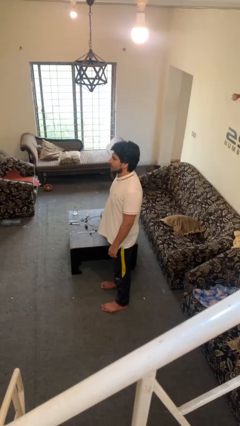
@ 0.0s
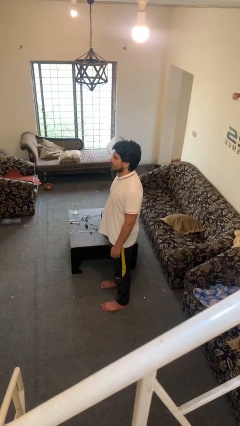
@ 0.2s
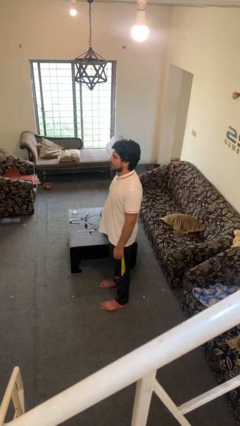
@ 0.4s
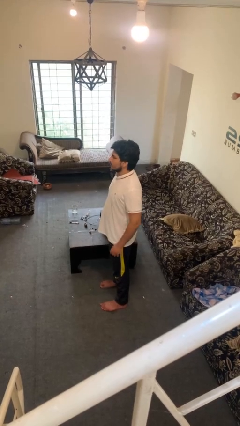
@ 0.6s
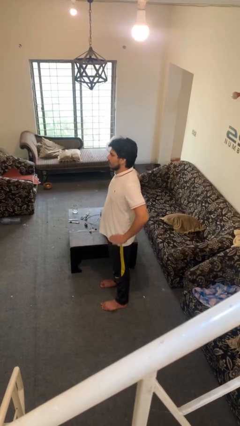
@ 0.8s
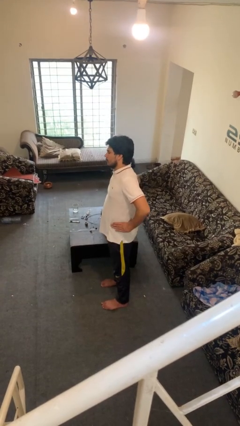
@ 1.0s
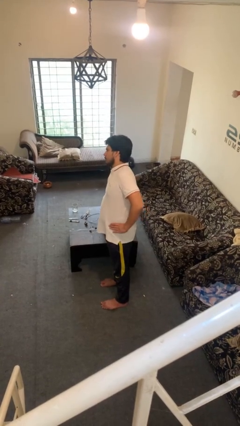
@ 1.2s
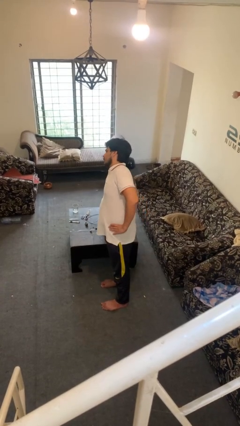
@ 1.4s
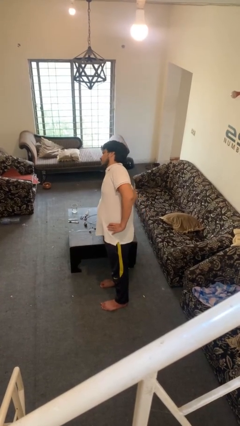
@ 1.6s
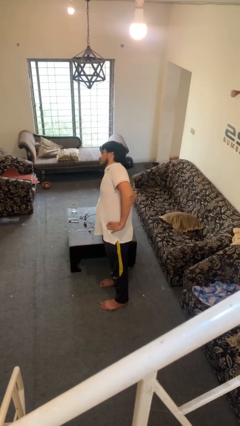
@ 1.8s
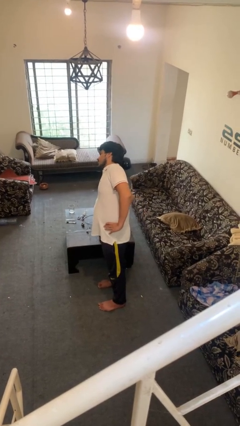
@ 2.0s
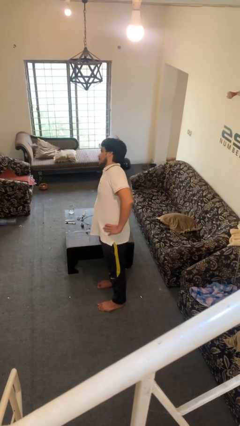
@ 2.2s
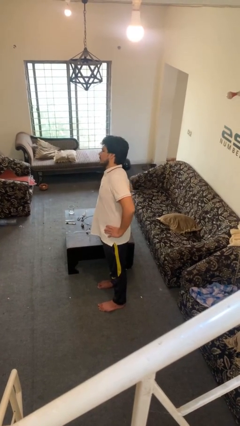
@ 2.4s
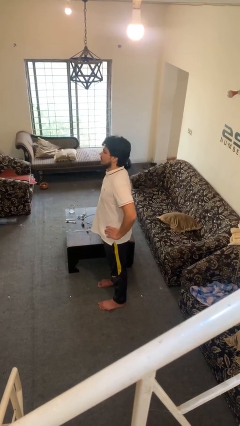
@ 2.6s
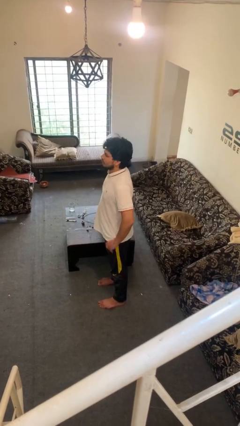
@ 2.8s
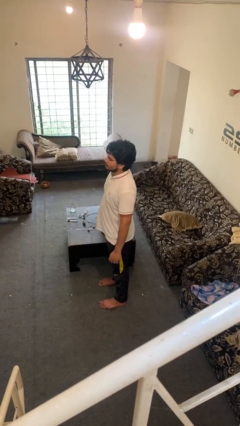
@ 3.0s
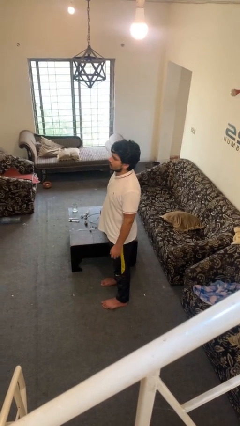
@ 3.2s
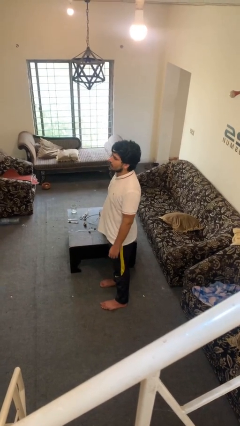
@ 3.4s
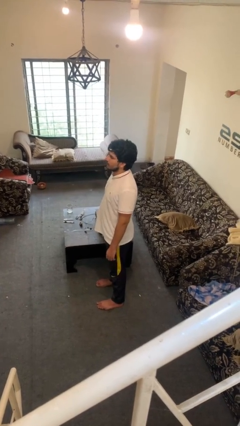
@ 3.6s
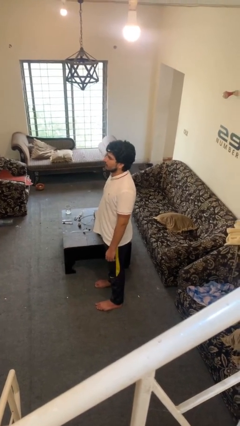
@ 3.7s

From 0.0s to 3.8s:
person stretches arms to side

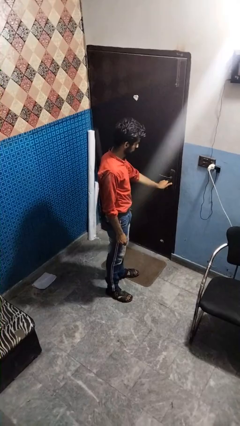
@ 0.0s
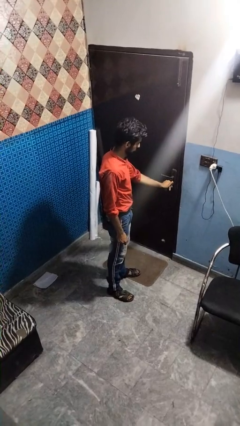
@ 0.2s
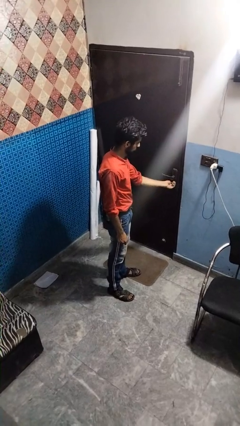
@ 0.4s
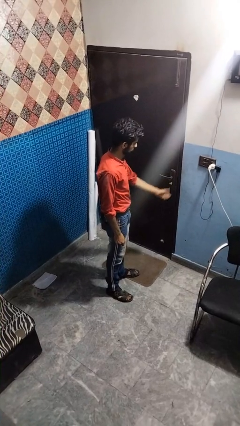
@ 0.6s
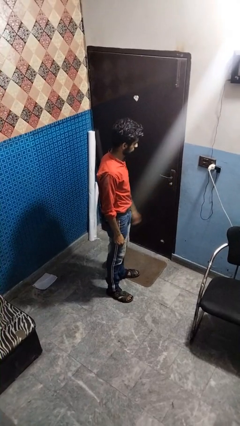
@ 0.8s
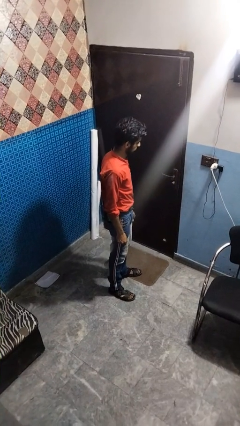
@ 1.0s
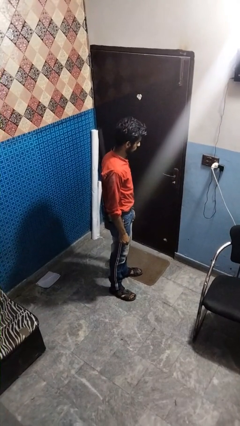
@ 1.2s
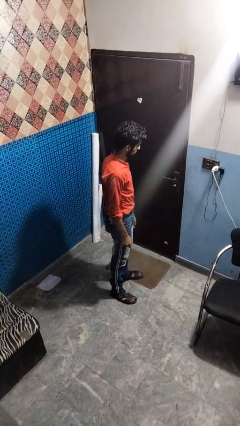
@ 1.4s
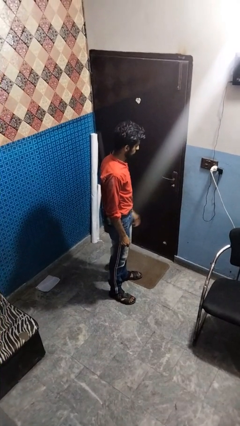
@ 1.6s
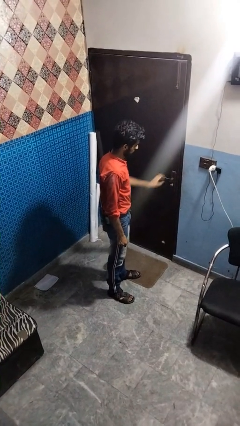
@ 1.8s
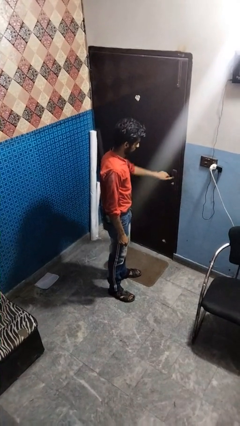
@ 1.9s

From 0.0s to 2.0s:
person unlocks door with keys

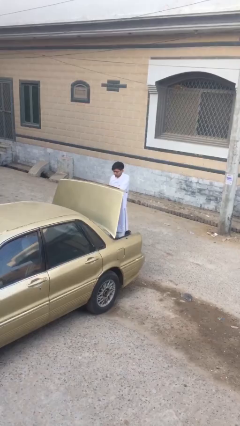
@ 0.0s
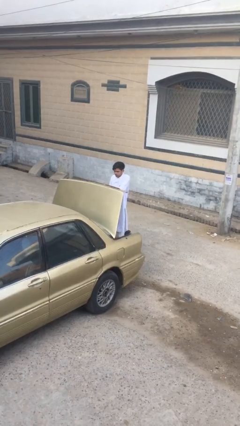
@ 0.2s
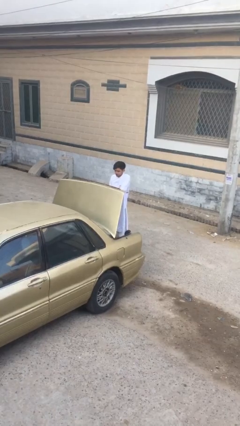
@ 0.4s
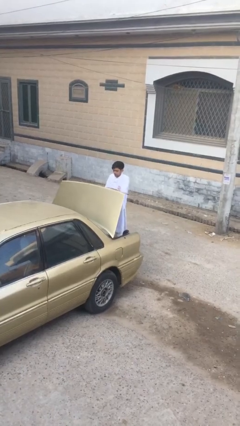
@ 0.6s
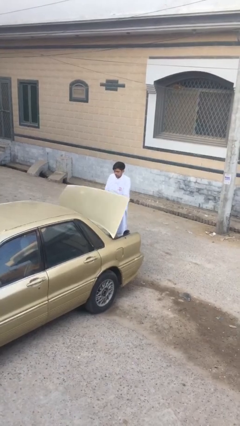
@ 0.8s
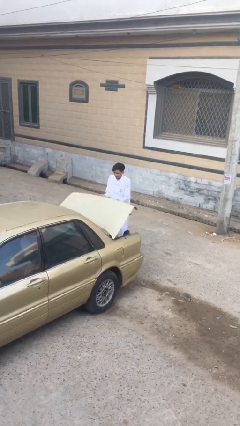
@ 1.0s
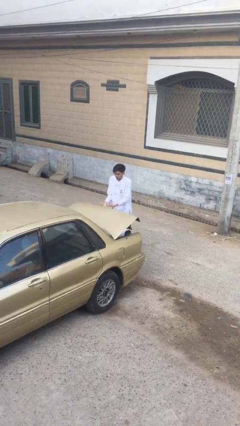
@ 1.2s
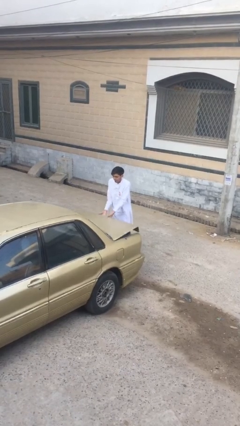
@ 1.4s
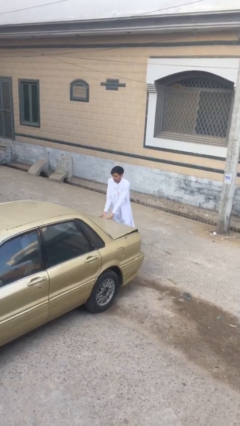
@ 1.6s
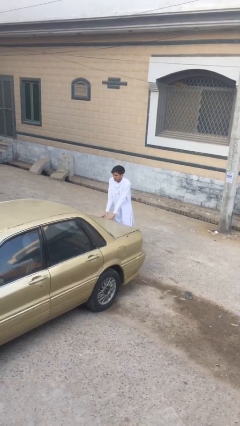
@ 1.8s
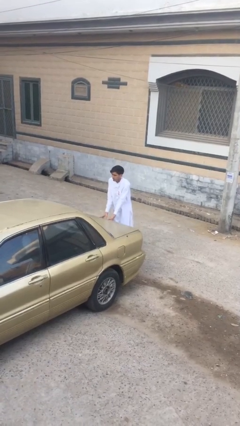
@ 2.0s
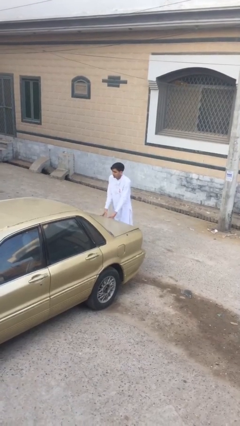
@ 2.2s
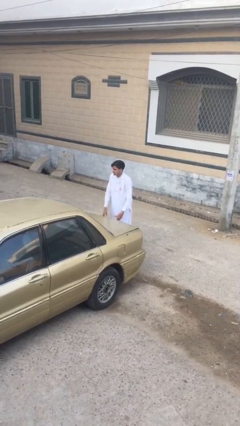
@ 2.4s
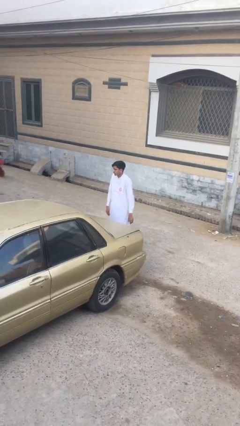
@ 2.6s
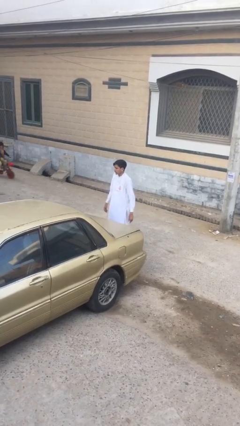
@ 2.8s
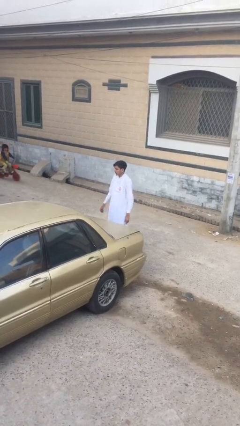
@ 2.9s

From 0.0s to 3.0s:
person closes car trunk

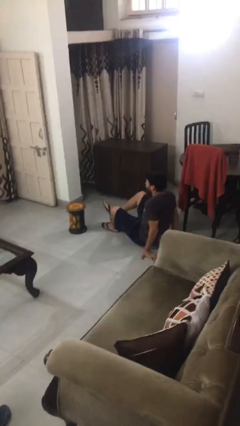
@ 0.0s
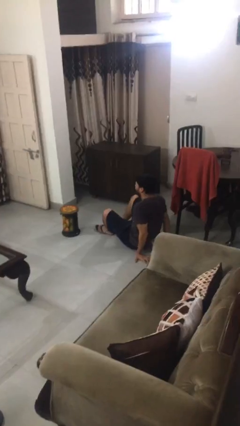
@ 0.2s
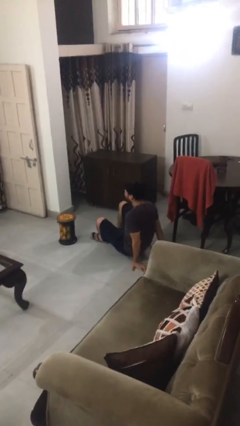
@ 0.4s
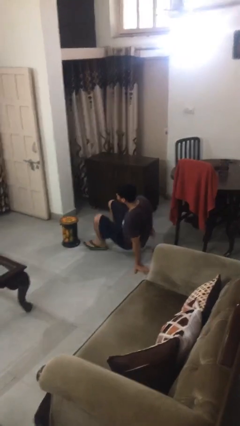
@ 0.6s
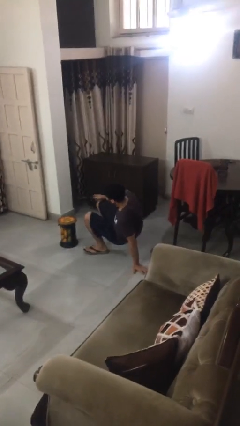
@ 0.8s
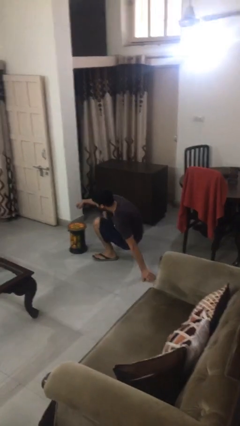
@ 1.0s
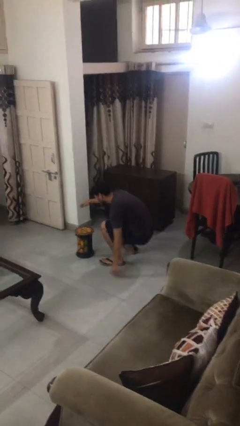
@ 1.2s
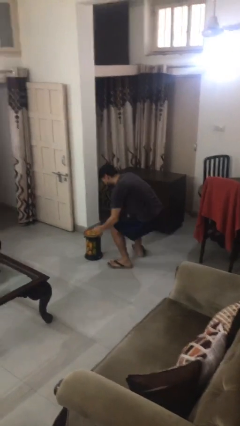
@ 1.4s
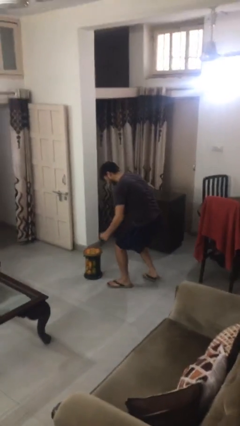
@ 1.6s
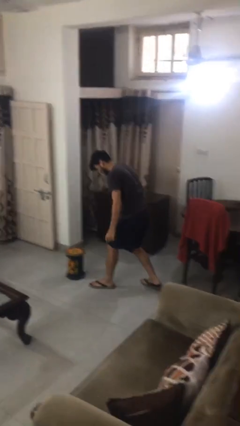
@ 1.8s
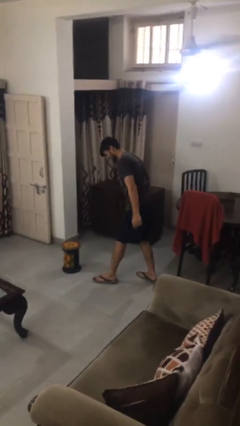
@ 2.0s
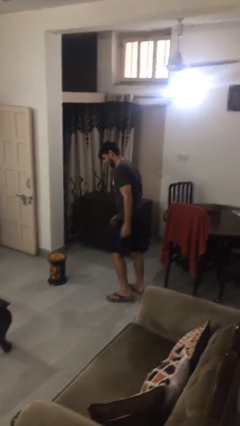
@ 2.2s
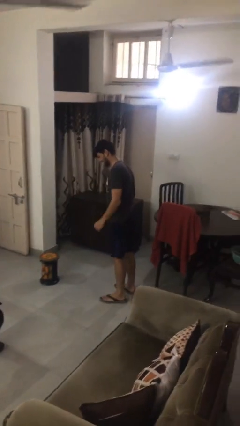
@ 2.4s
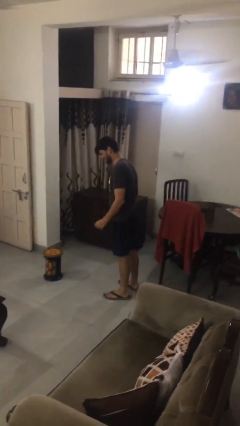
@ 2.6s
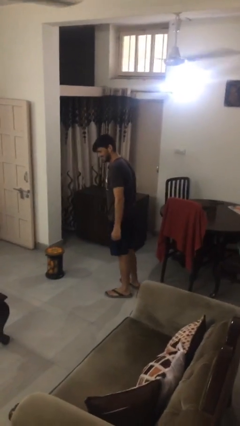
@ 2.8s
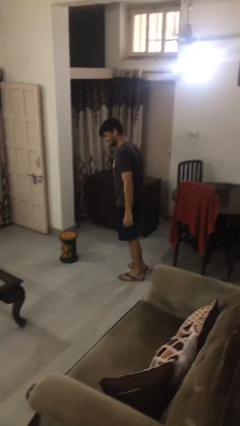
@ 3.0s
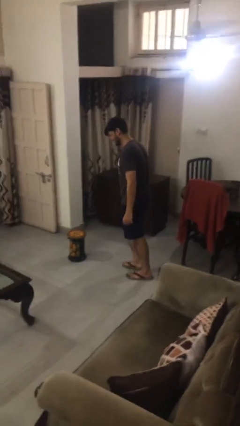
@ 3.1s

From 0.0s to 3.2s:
person stands up from floor

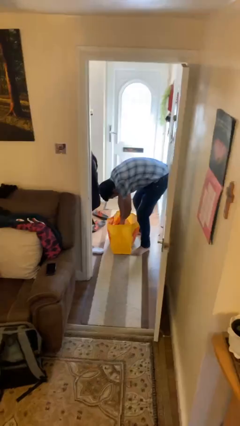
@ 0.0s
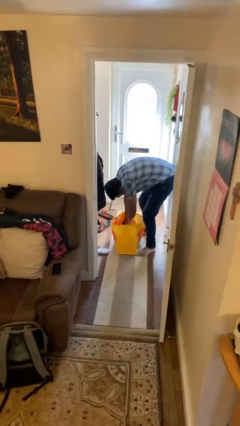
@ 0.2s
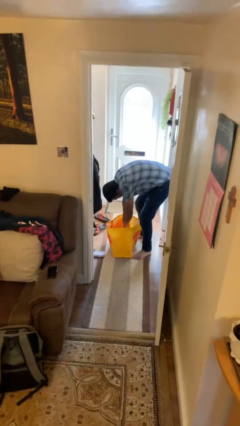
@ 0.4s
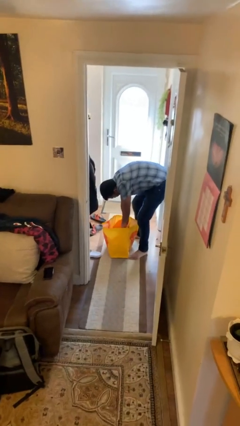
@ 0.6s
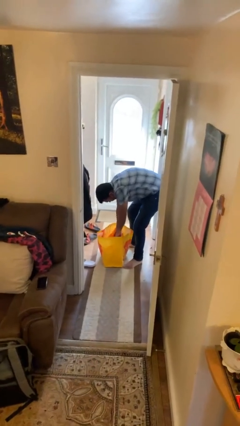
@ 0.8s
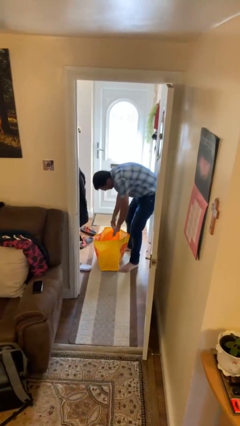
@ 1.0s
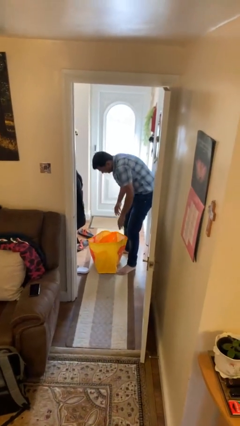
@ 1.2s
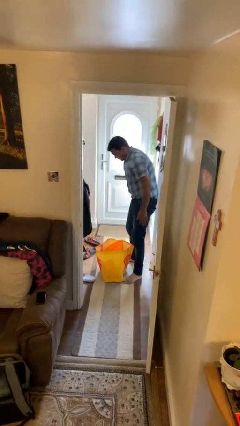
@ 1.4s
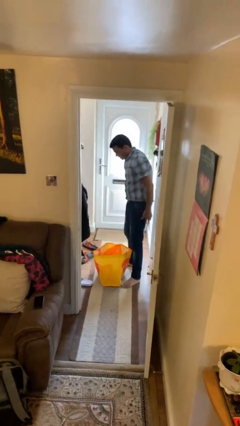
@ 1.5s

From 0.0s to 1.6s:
person searches in bag

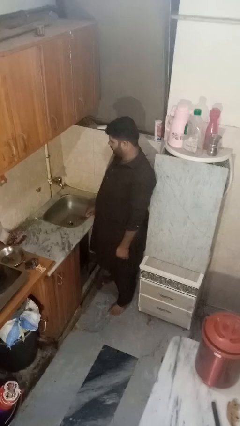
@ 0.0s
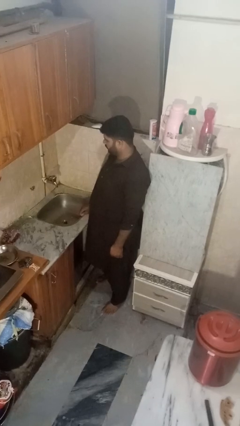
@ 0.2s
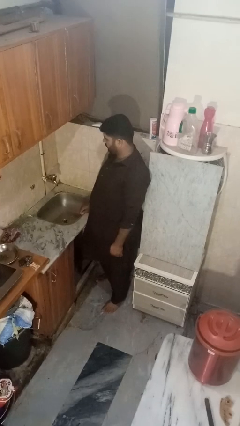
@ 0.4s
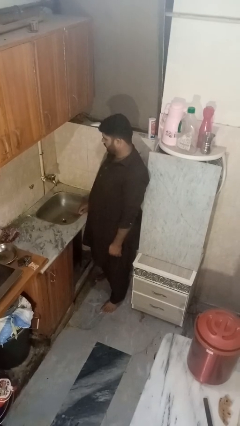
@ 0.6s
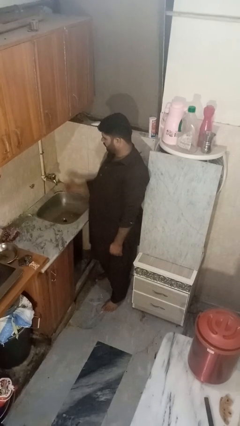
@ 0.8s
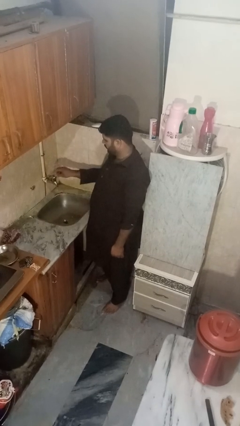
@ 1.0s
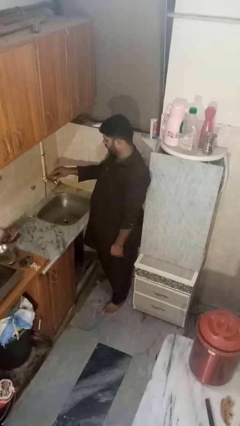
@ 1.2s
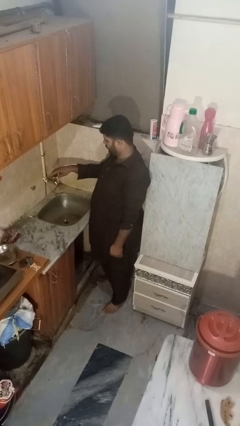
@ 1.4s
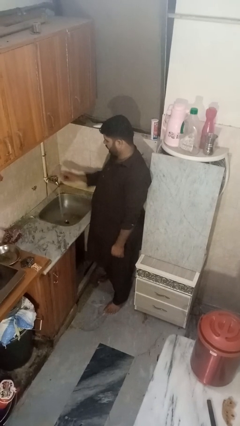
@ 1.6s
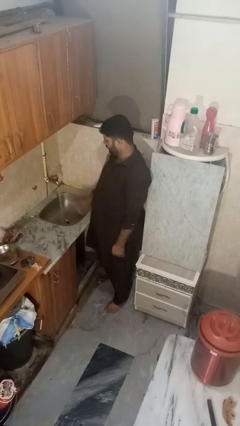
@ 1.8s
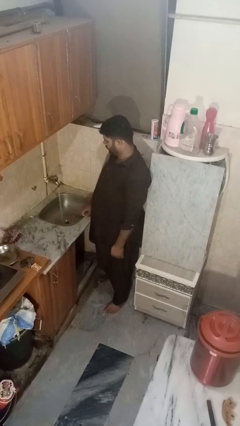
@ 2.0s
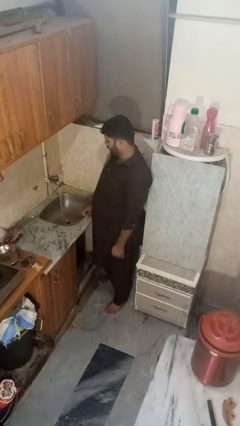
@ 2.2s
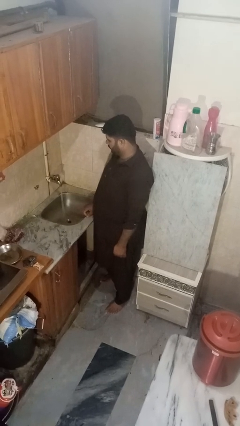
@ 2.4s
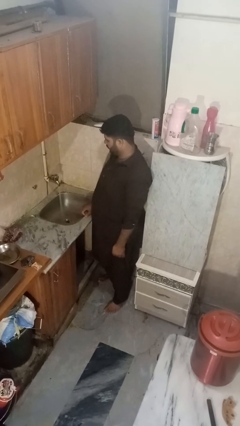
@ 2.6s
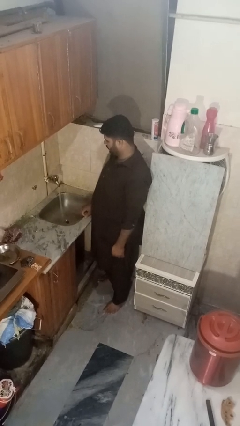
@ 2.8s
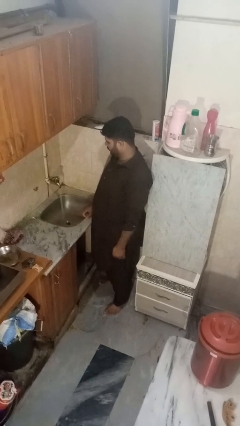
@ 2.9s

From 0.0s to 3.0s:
person turns on faucet

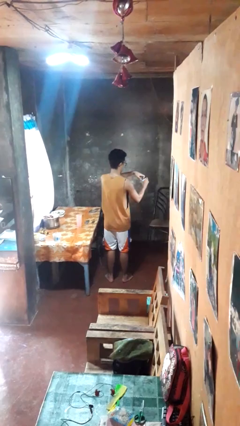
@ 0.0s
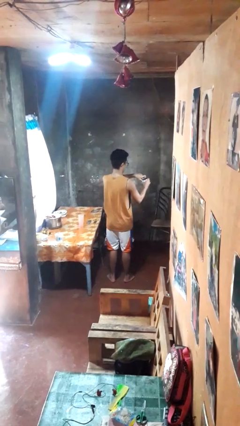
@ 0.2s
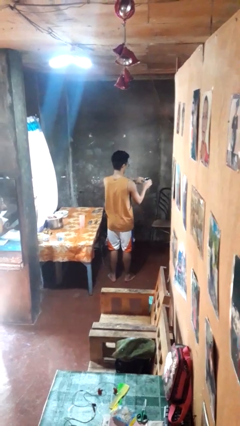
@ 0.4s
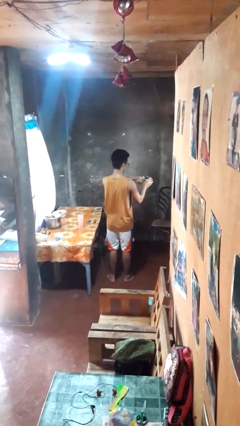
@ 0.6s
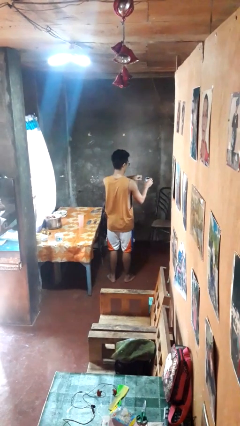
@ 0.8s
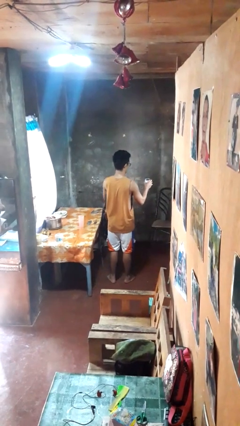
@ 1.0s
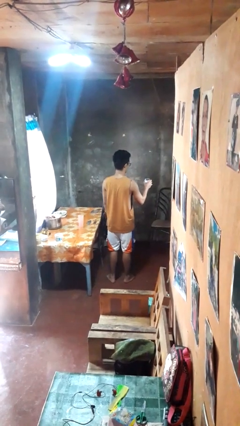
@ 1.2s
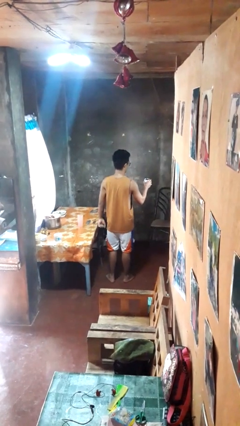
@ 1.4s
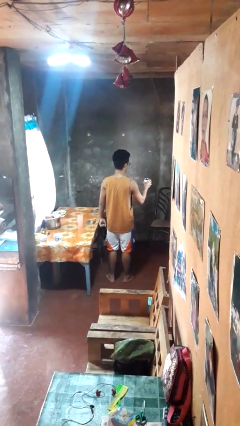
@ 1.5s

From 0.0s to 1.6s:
person opens beverage can
